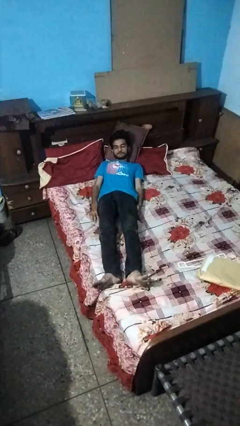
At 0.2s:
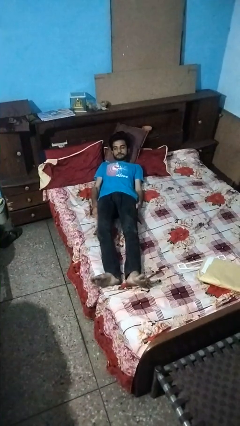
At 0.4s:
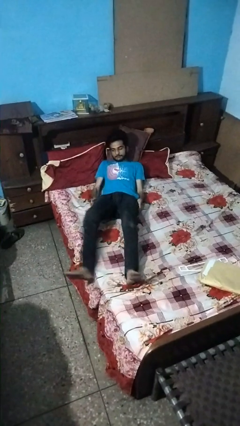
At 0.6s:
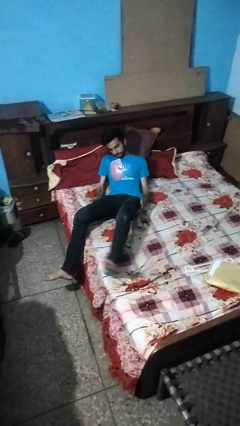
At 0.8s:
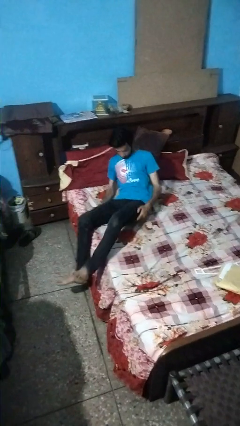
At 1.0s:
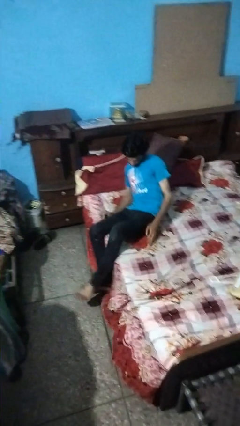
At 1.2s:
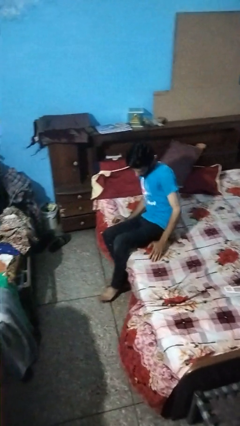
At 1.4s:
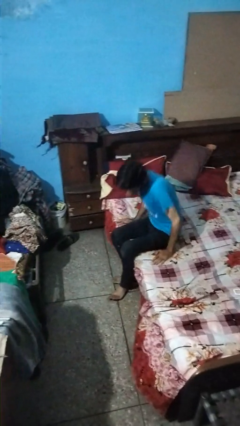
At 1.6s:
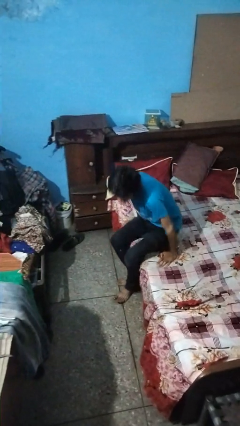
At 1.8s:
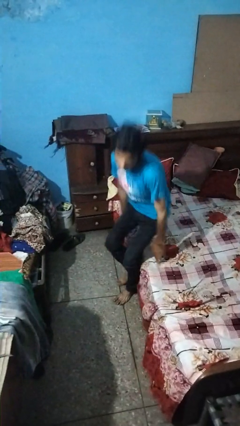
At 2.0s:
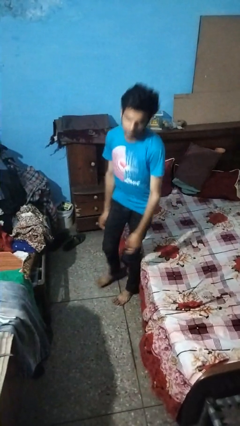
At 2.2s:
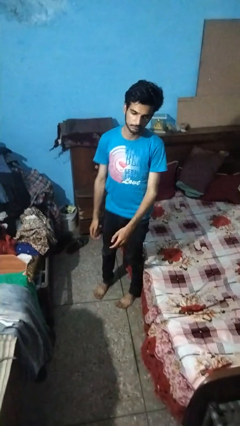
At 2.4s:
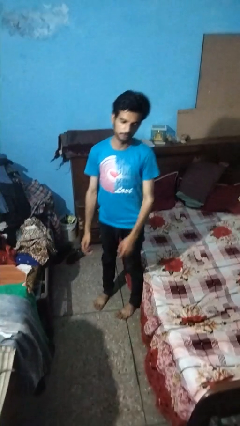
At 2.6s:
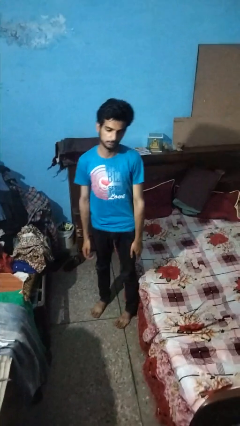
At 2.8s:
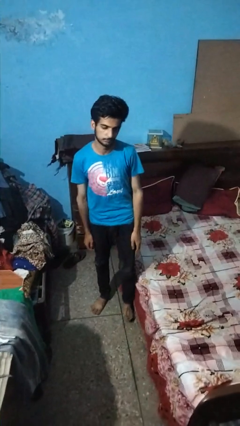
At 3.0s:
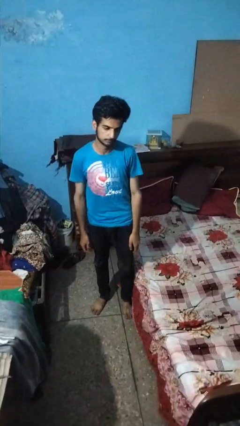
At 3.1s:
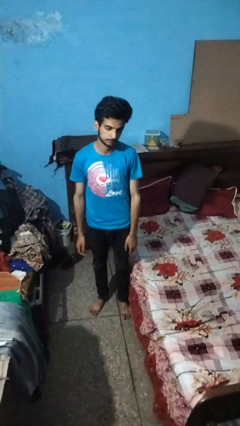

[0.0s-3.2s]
person stands up

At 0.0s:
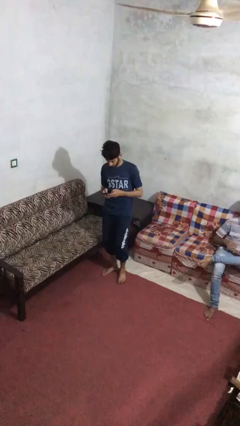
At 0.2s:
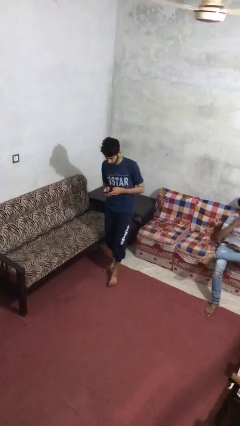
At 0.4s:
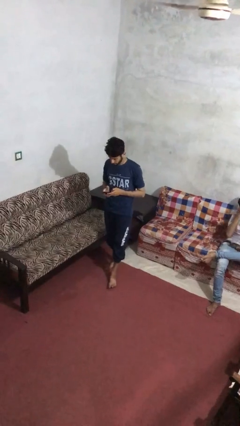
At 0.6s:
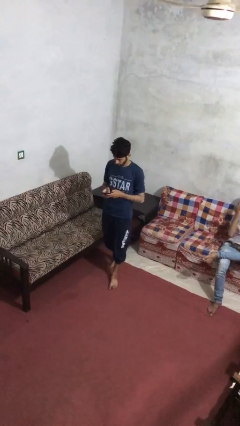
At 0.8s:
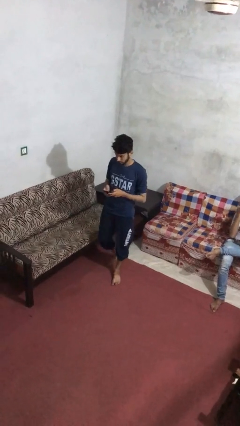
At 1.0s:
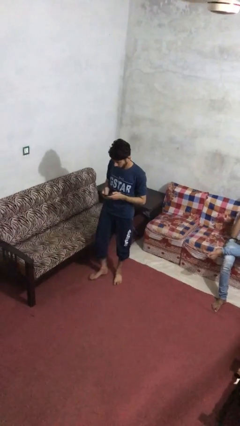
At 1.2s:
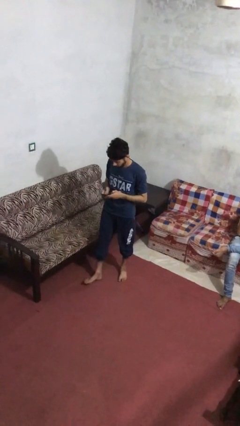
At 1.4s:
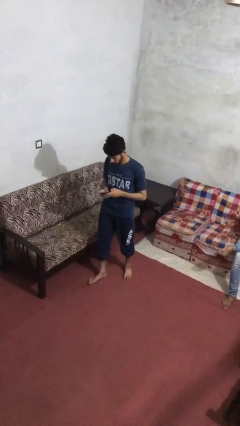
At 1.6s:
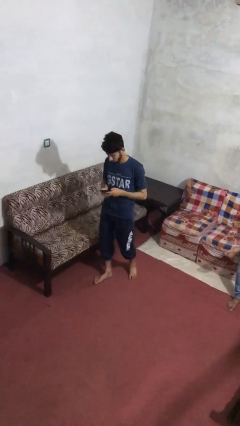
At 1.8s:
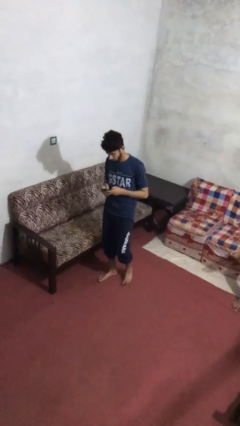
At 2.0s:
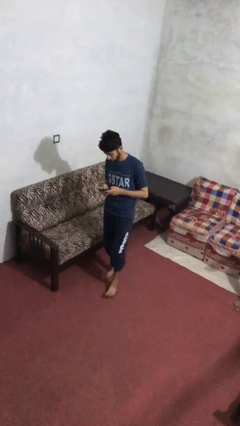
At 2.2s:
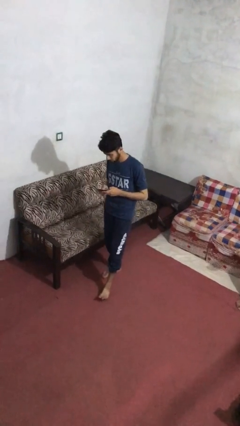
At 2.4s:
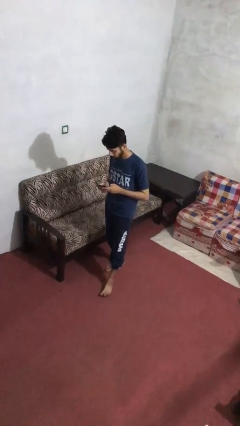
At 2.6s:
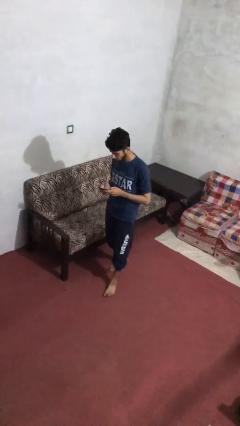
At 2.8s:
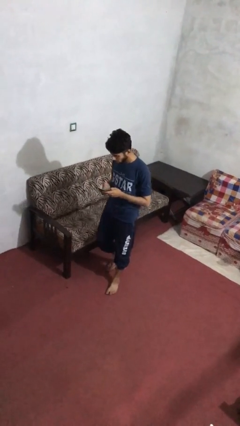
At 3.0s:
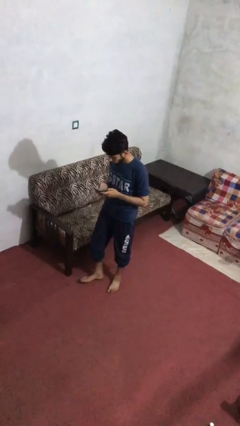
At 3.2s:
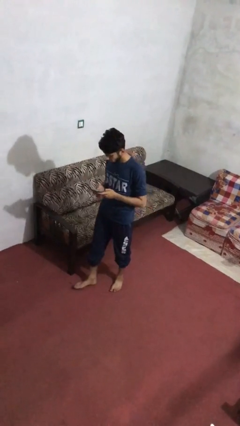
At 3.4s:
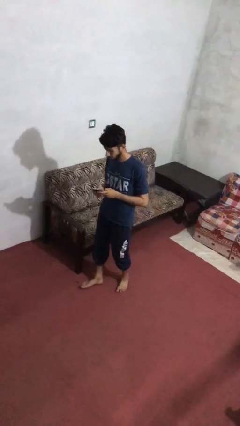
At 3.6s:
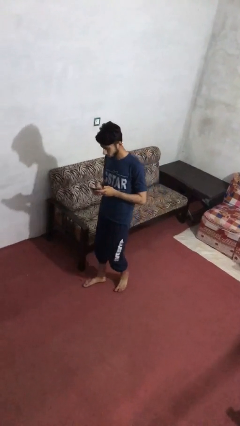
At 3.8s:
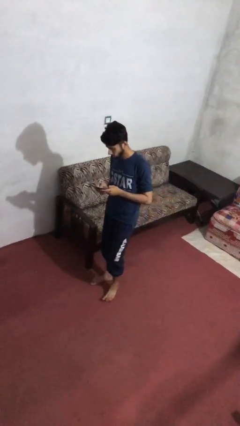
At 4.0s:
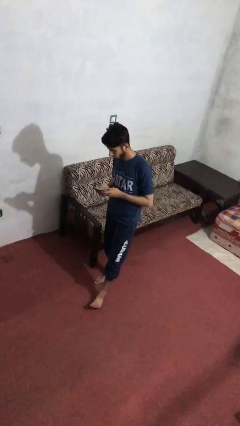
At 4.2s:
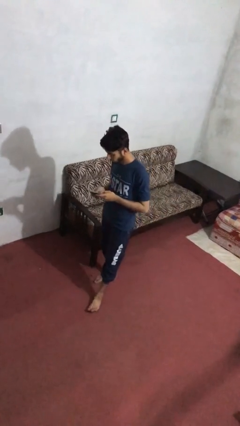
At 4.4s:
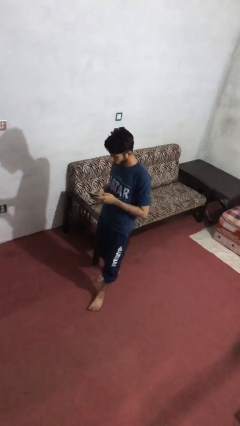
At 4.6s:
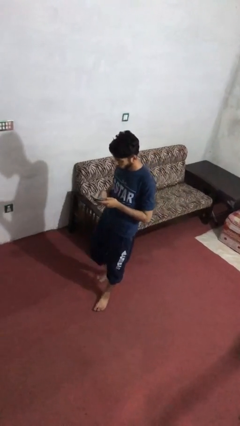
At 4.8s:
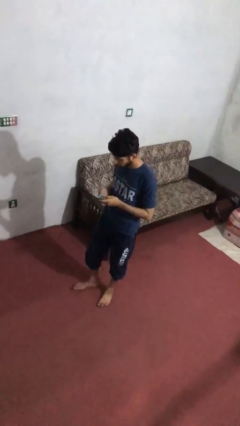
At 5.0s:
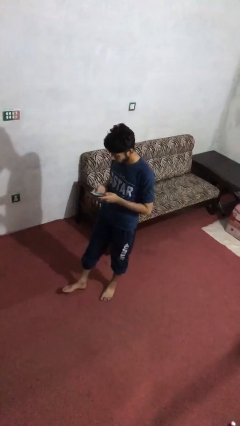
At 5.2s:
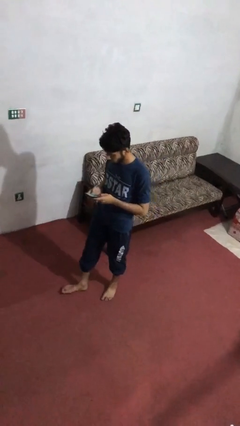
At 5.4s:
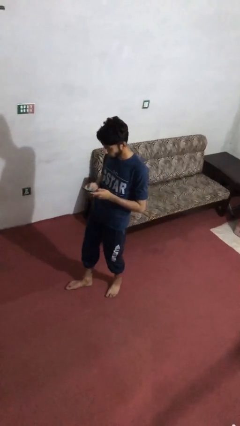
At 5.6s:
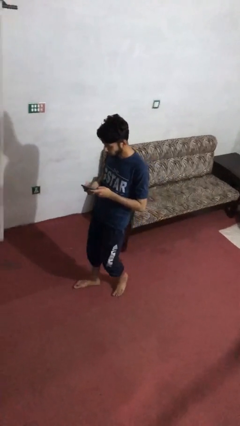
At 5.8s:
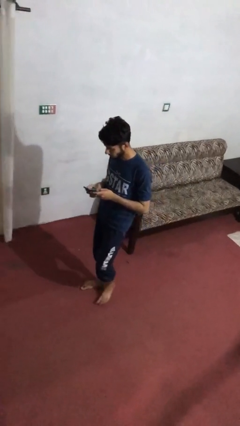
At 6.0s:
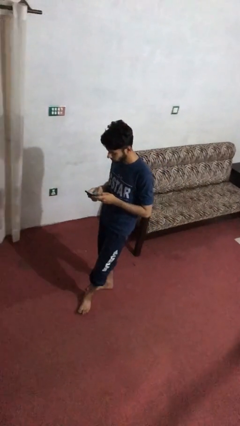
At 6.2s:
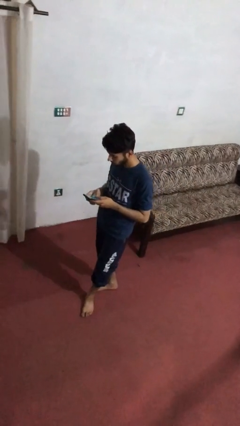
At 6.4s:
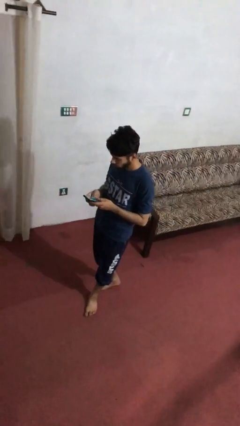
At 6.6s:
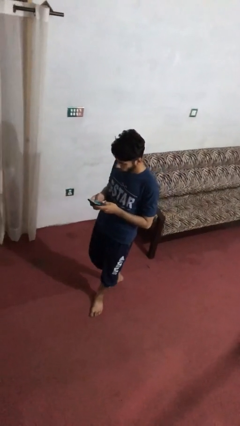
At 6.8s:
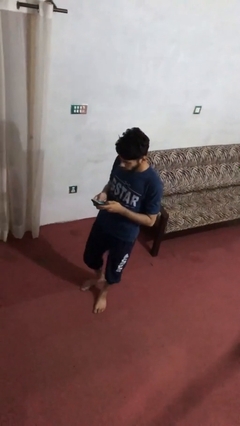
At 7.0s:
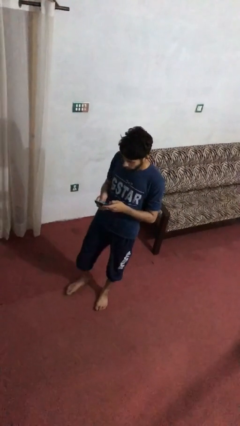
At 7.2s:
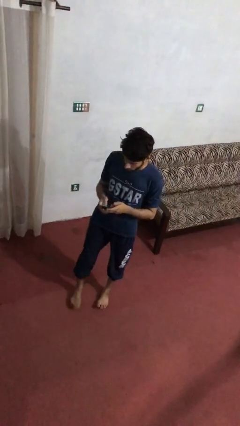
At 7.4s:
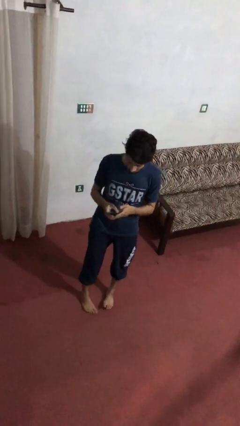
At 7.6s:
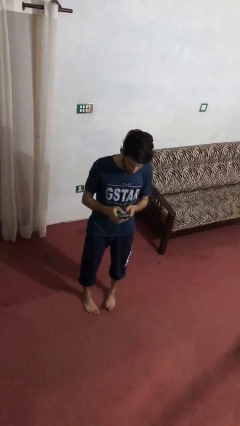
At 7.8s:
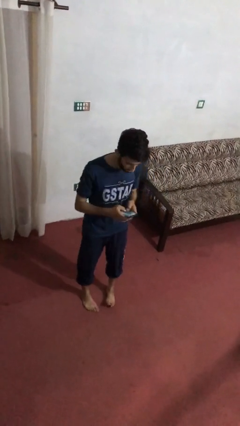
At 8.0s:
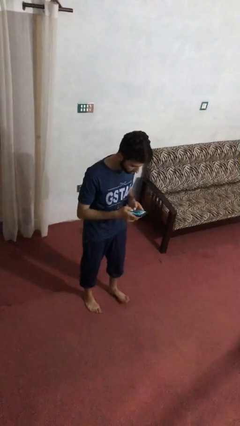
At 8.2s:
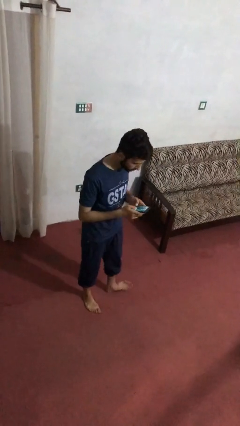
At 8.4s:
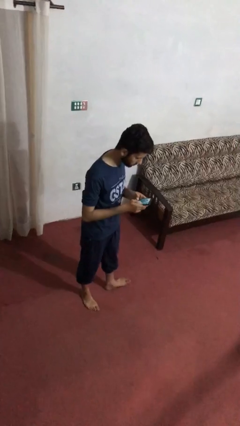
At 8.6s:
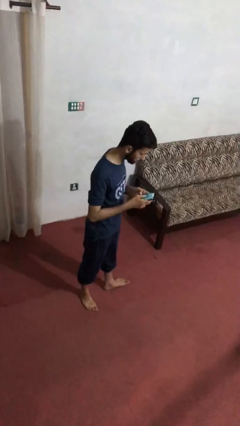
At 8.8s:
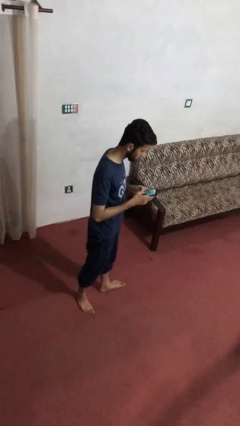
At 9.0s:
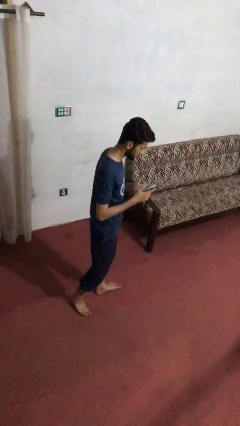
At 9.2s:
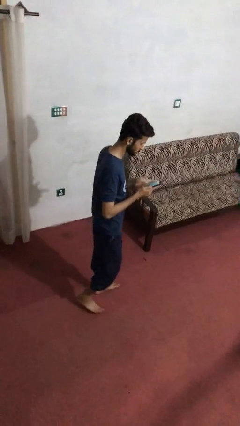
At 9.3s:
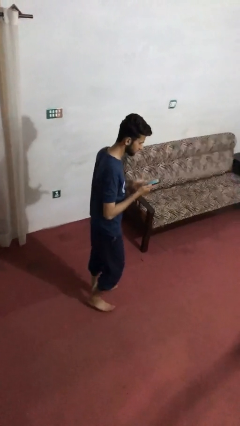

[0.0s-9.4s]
person texts on phone

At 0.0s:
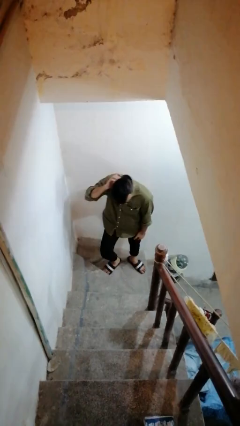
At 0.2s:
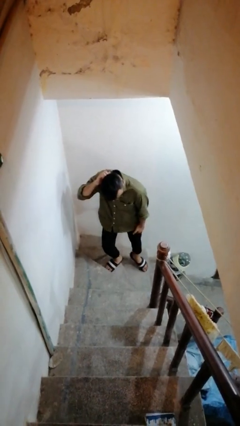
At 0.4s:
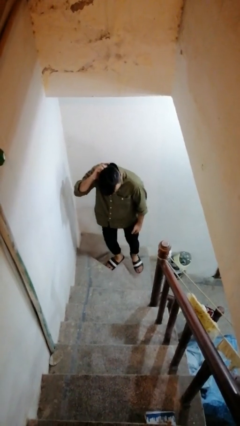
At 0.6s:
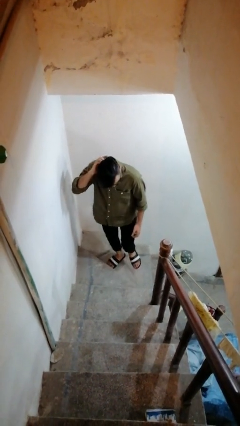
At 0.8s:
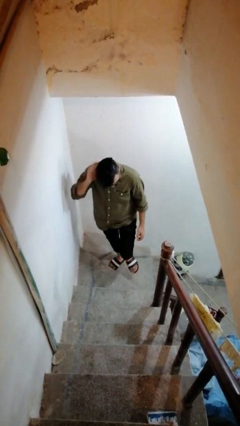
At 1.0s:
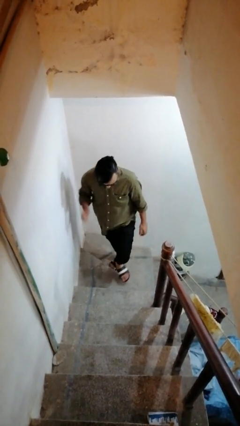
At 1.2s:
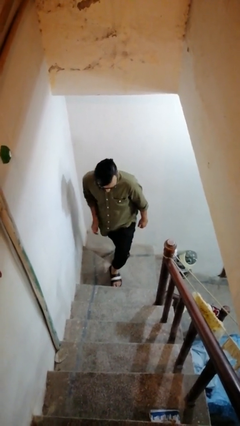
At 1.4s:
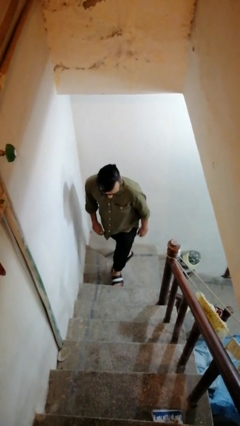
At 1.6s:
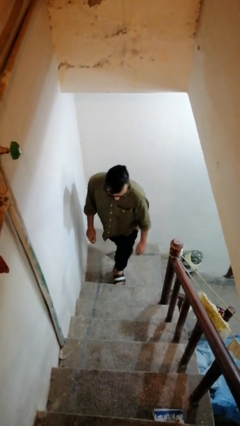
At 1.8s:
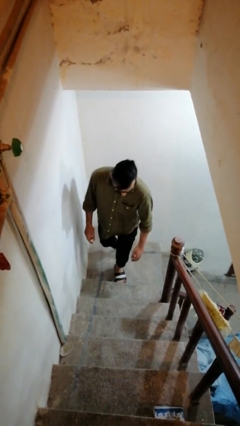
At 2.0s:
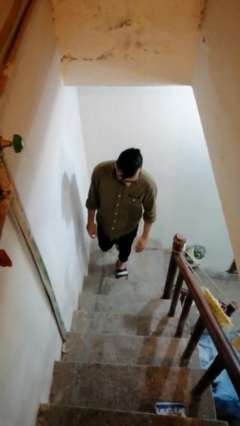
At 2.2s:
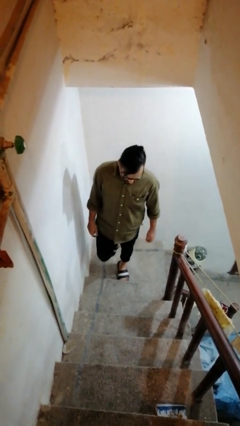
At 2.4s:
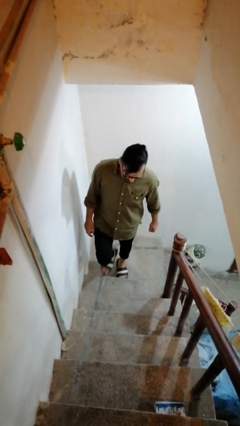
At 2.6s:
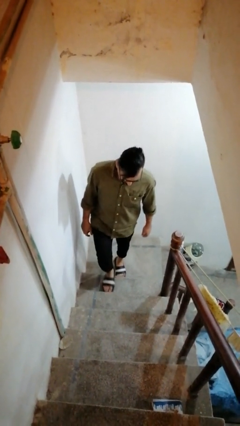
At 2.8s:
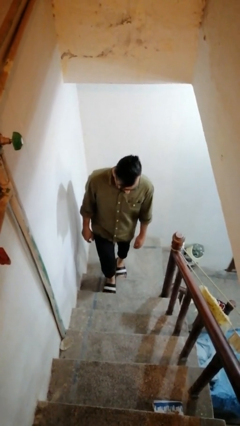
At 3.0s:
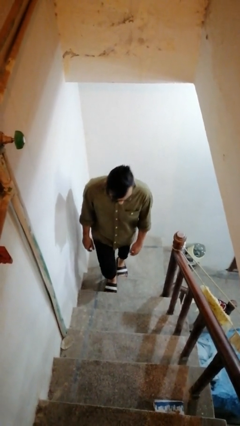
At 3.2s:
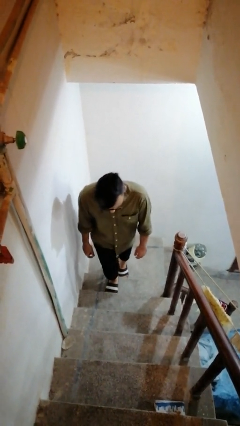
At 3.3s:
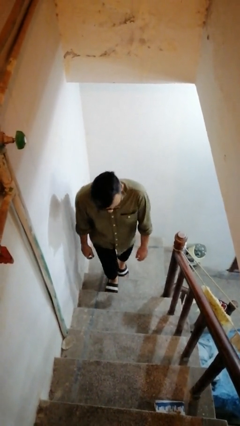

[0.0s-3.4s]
person climbs up stairs

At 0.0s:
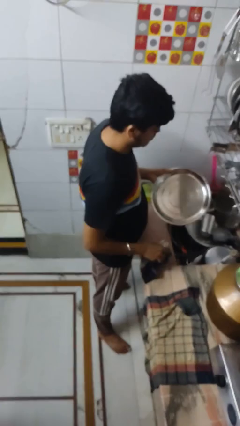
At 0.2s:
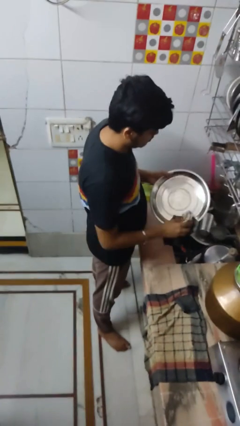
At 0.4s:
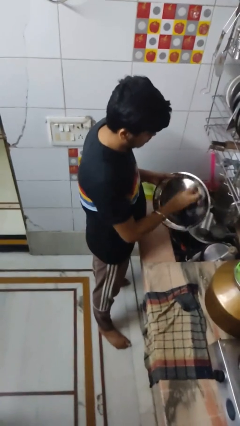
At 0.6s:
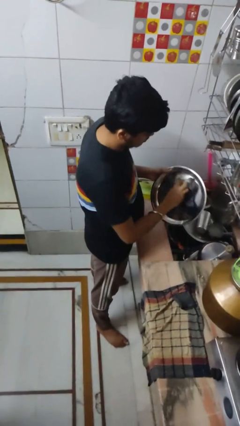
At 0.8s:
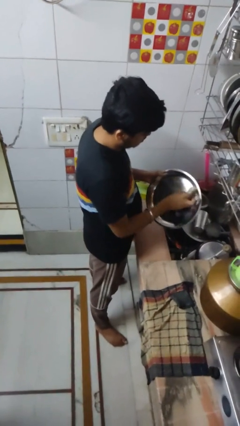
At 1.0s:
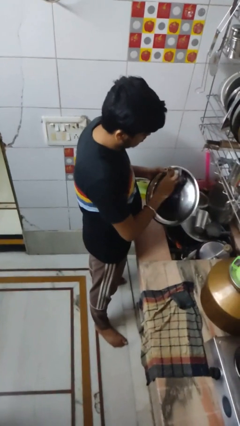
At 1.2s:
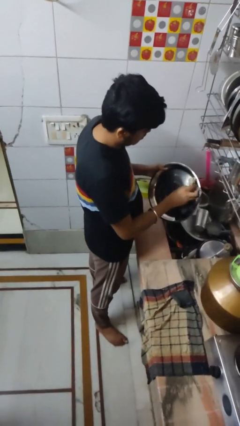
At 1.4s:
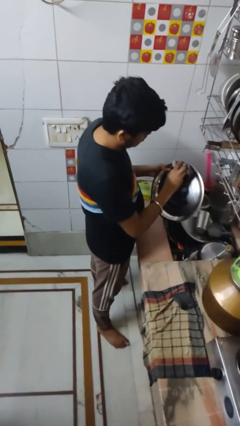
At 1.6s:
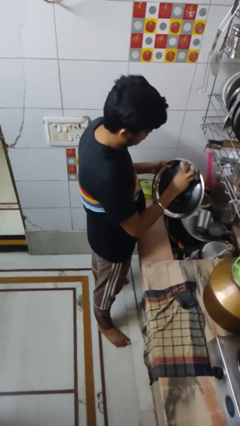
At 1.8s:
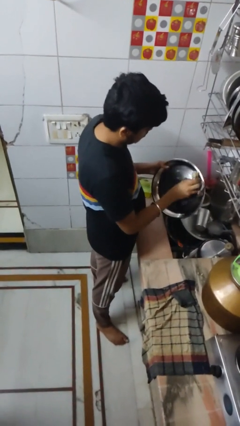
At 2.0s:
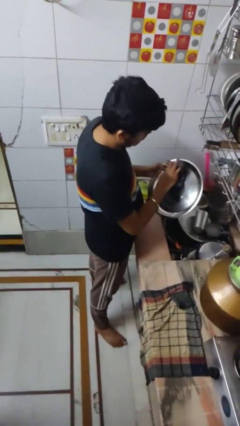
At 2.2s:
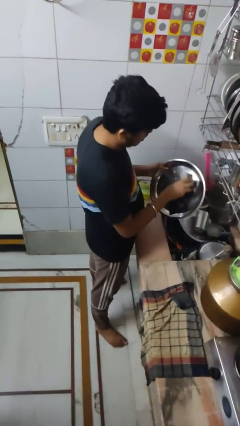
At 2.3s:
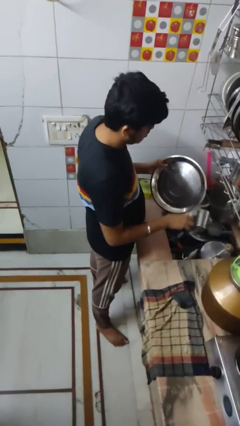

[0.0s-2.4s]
person dries dish
